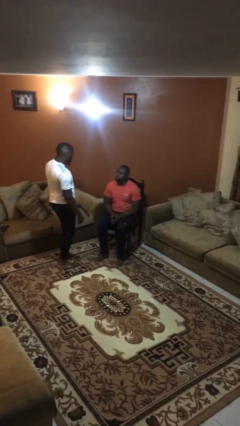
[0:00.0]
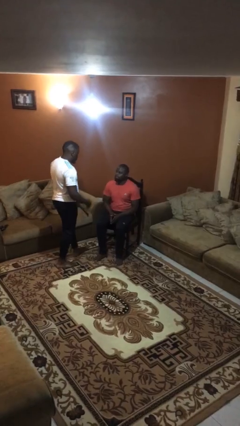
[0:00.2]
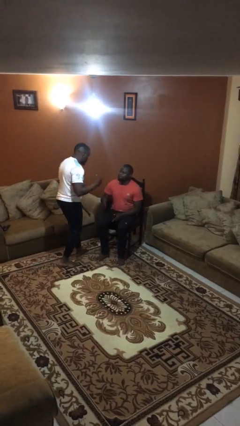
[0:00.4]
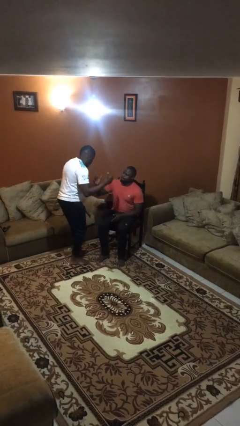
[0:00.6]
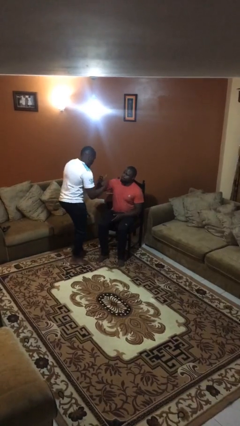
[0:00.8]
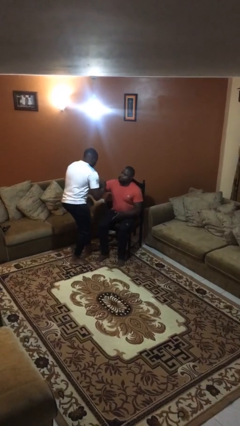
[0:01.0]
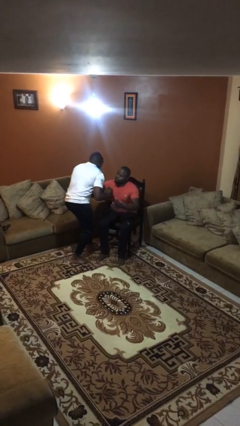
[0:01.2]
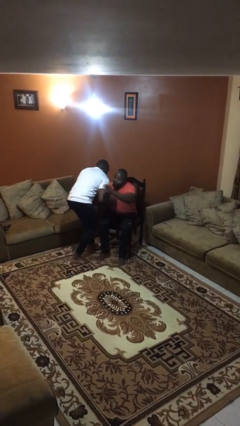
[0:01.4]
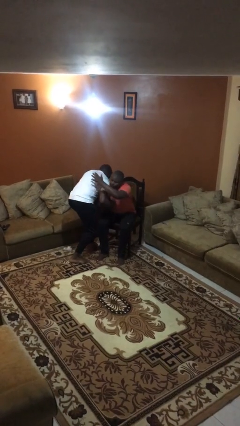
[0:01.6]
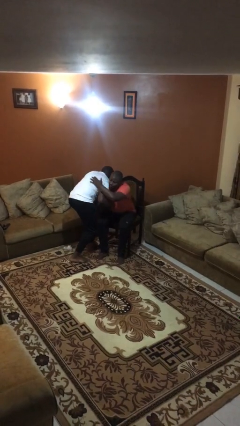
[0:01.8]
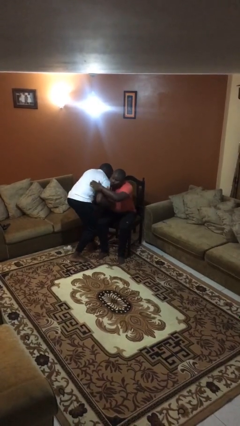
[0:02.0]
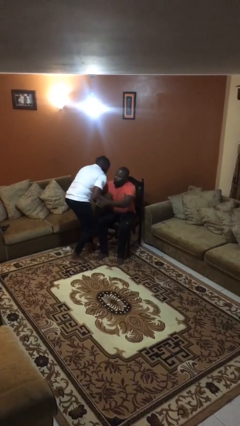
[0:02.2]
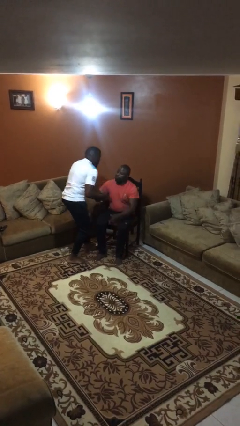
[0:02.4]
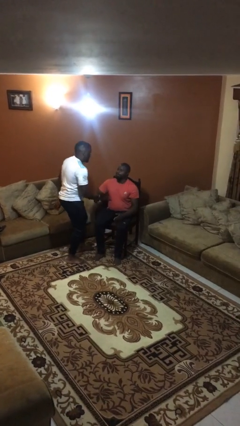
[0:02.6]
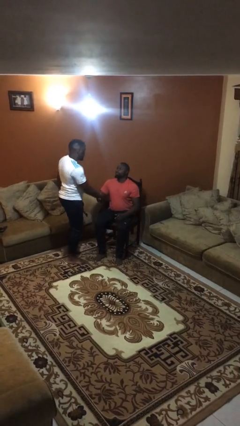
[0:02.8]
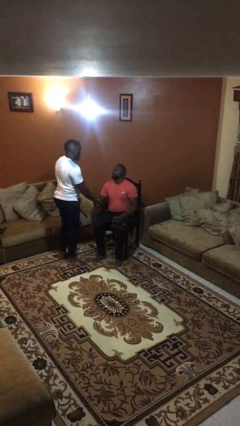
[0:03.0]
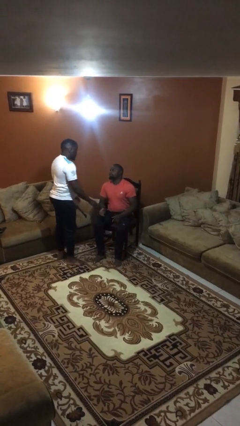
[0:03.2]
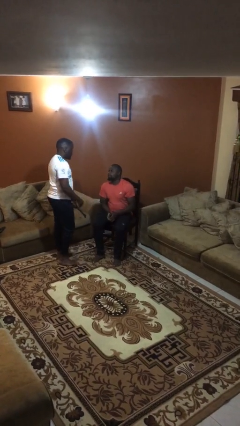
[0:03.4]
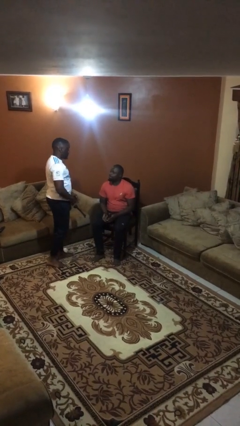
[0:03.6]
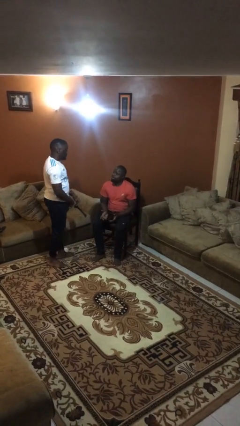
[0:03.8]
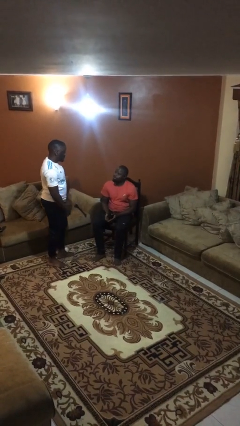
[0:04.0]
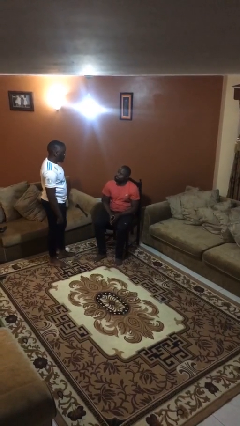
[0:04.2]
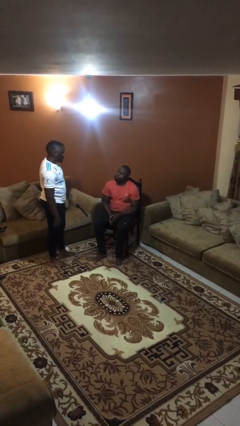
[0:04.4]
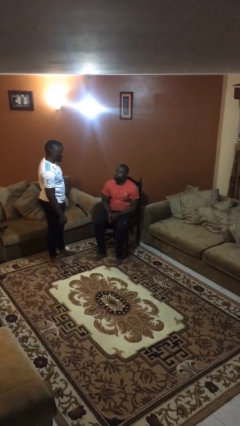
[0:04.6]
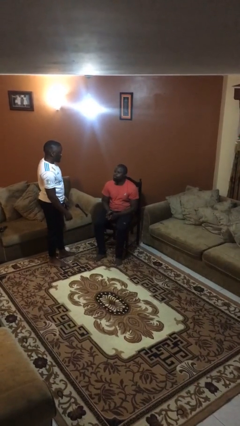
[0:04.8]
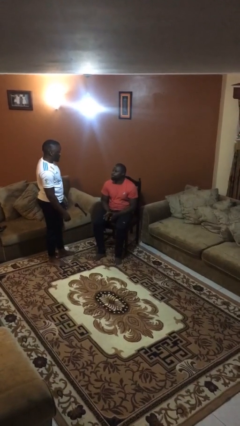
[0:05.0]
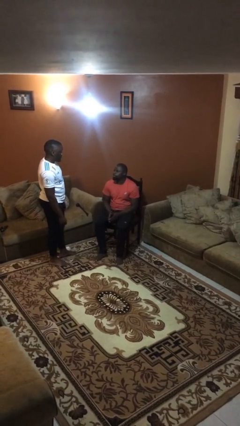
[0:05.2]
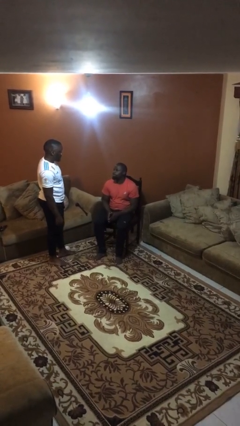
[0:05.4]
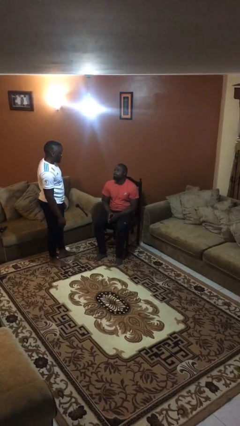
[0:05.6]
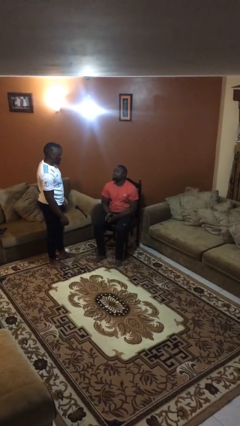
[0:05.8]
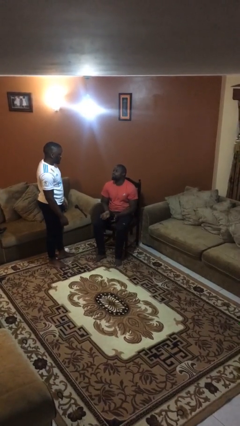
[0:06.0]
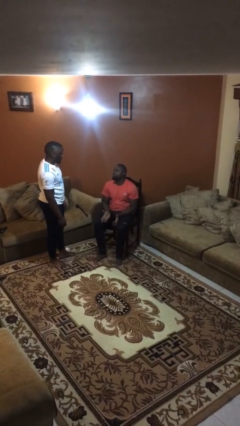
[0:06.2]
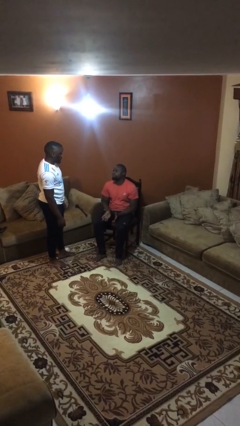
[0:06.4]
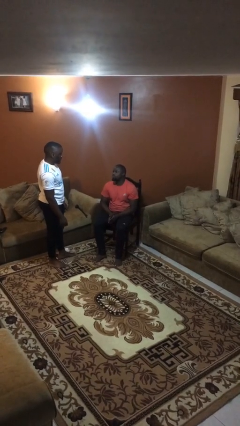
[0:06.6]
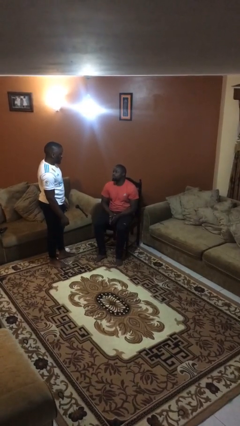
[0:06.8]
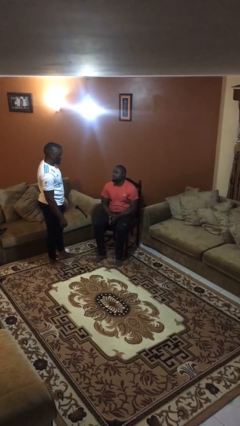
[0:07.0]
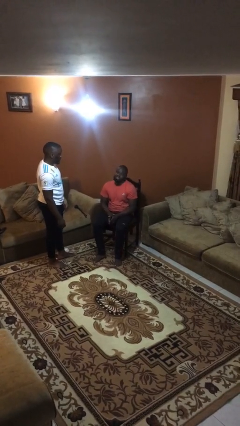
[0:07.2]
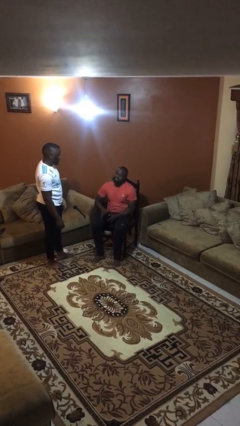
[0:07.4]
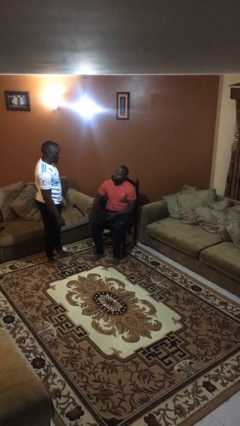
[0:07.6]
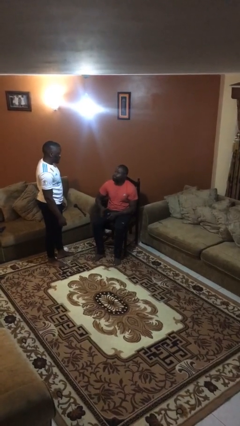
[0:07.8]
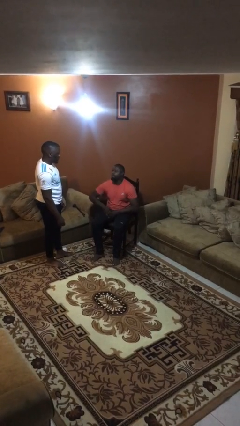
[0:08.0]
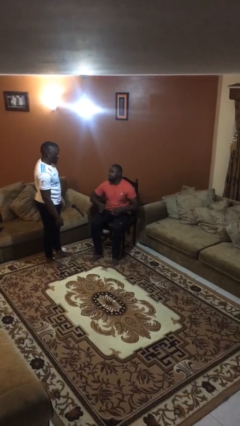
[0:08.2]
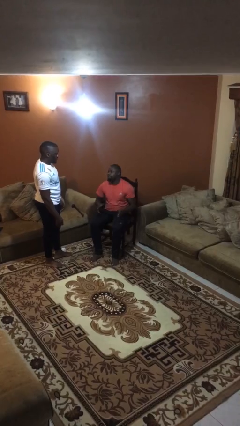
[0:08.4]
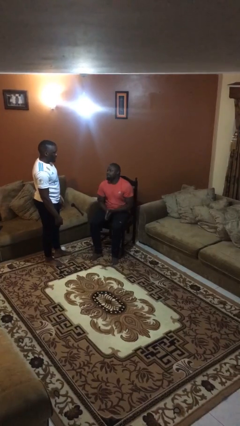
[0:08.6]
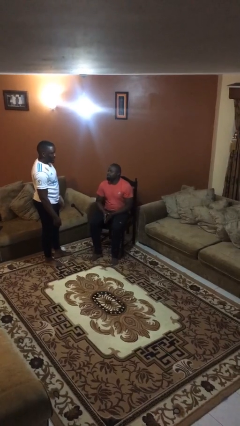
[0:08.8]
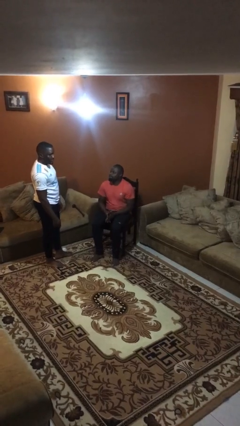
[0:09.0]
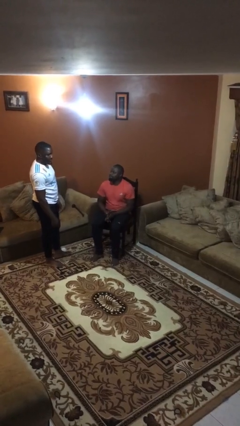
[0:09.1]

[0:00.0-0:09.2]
person embraces person

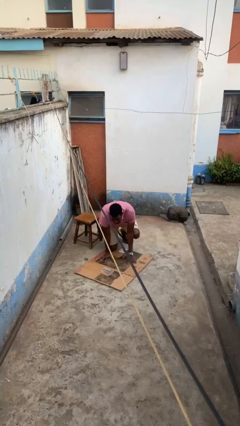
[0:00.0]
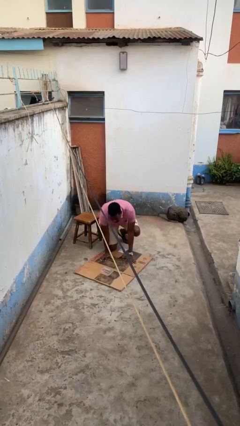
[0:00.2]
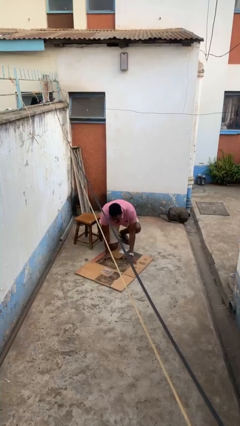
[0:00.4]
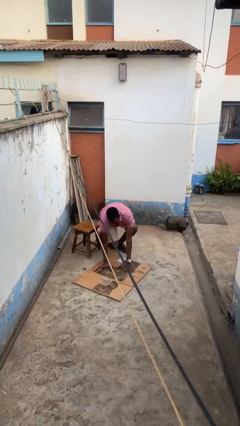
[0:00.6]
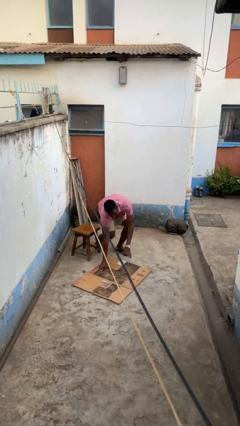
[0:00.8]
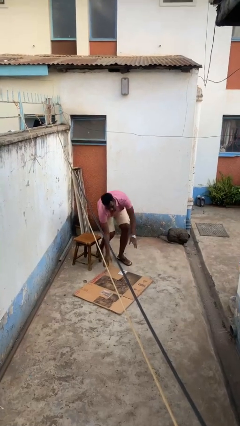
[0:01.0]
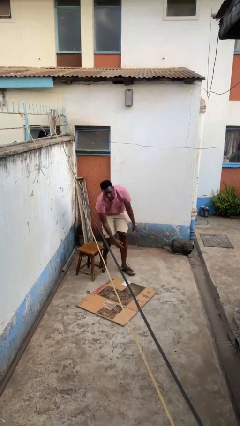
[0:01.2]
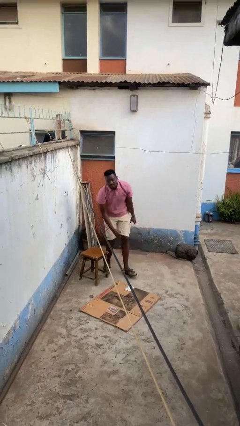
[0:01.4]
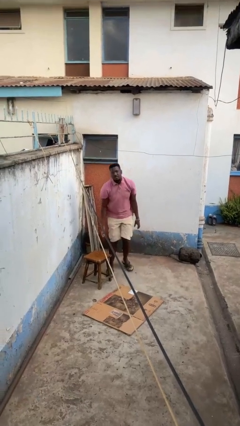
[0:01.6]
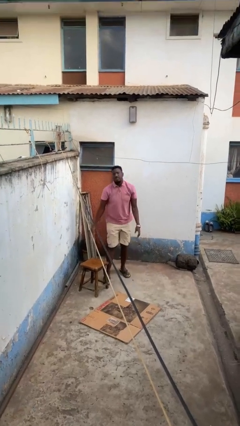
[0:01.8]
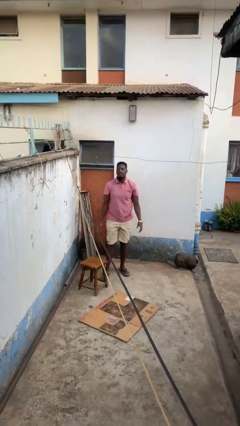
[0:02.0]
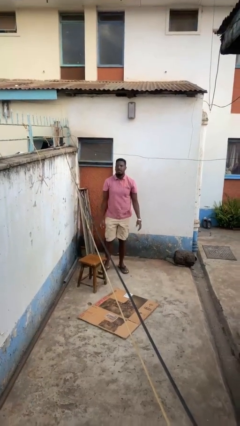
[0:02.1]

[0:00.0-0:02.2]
person stands up from floor

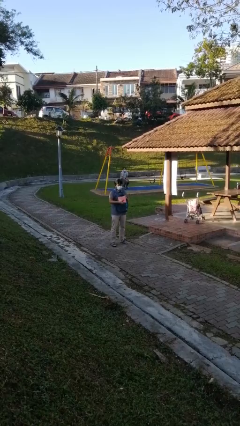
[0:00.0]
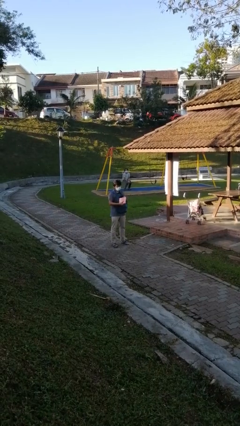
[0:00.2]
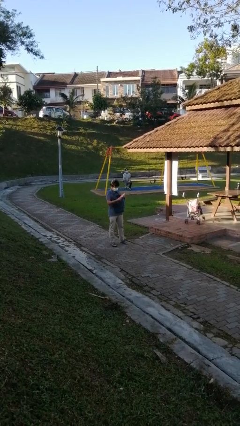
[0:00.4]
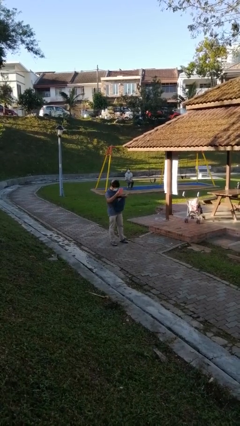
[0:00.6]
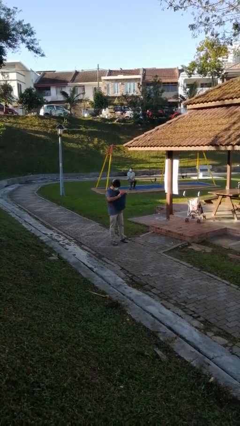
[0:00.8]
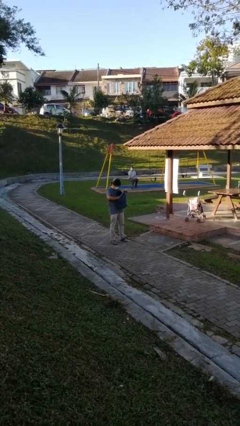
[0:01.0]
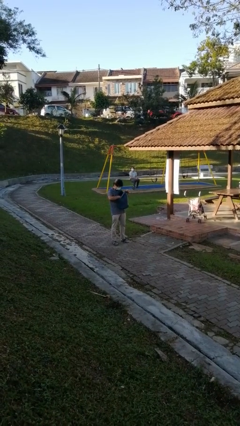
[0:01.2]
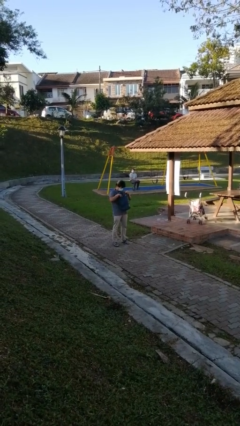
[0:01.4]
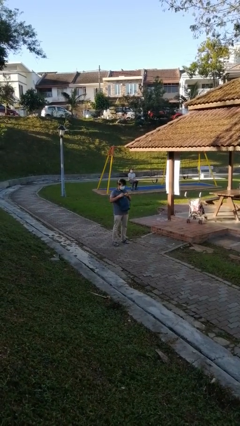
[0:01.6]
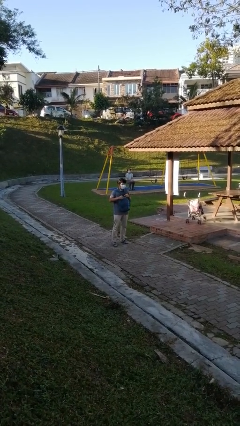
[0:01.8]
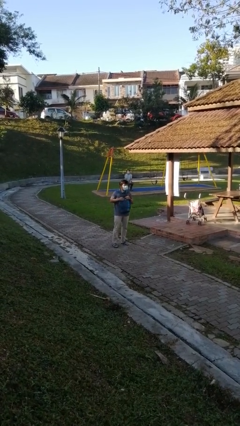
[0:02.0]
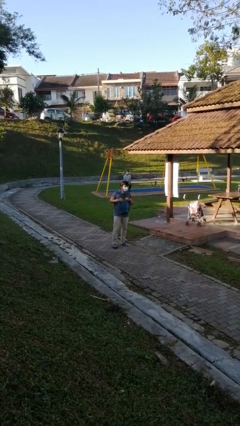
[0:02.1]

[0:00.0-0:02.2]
person puts object into backpack

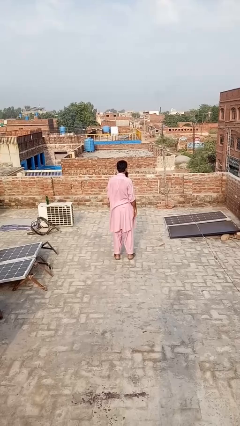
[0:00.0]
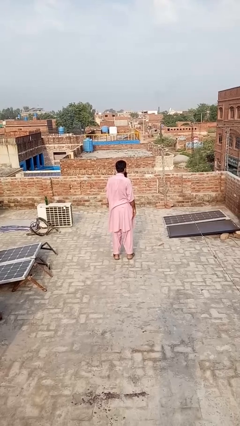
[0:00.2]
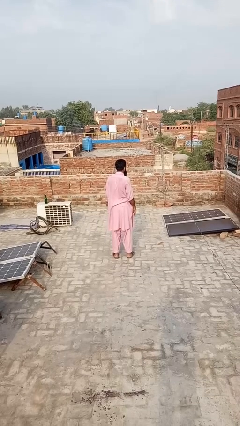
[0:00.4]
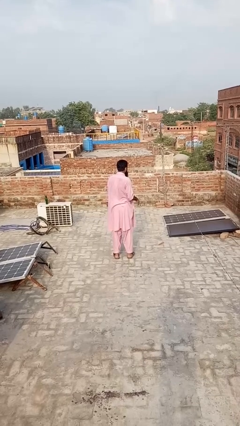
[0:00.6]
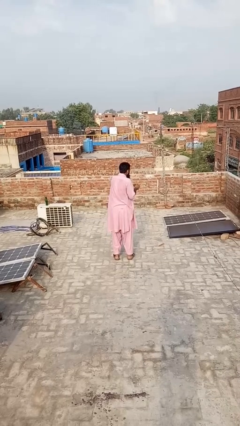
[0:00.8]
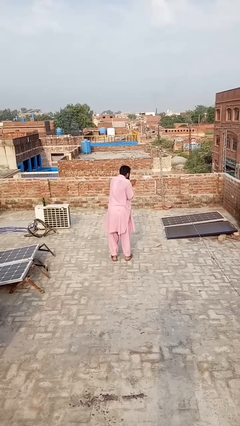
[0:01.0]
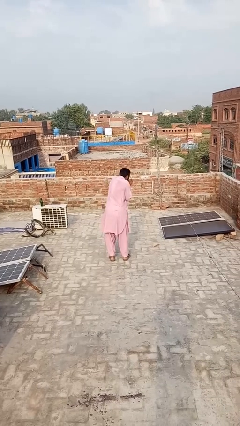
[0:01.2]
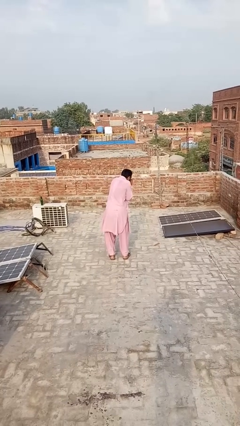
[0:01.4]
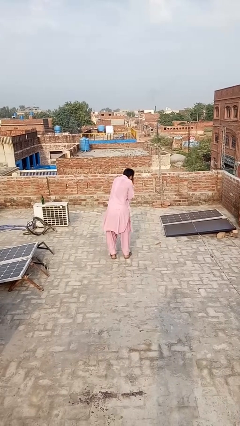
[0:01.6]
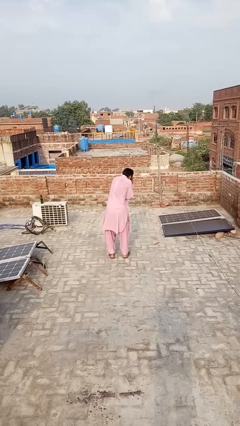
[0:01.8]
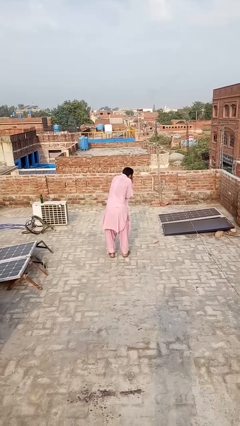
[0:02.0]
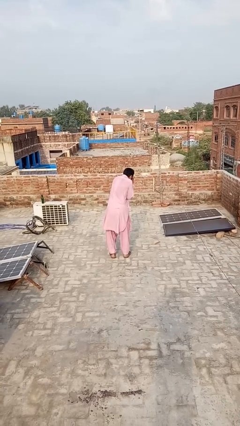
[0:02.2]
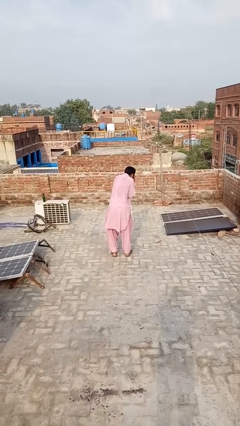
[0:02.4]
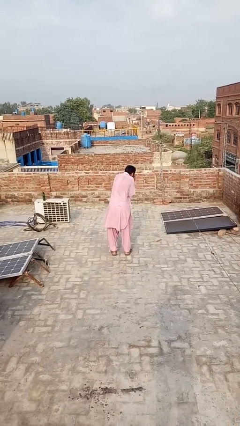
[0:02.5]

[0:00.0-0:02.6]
person blows into hands

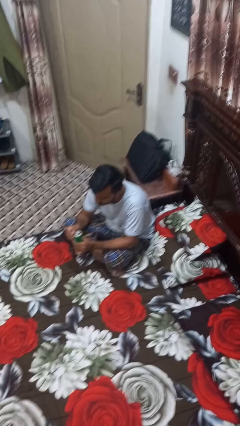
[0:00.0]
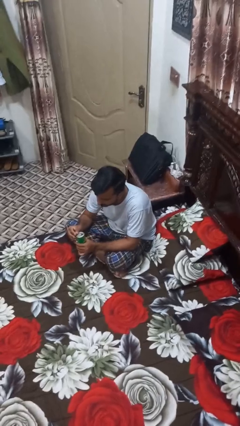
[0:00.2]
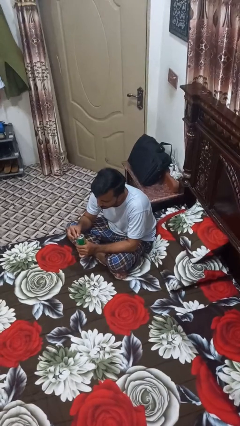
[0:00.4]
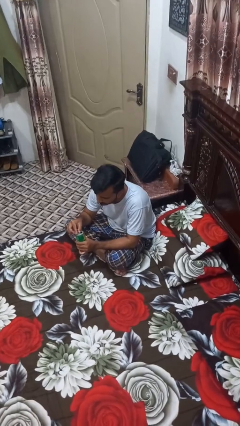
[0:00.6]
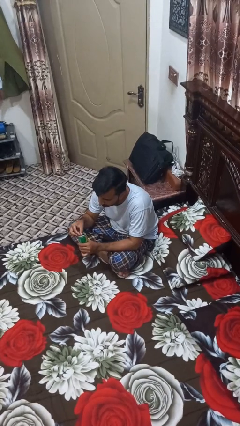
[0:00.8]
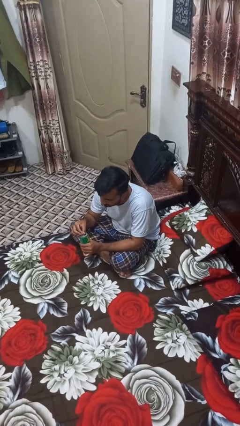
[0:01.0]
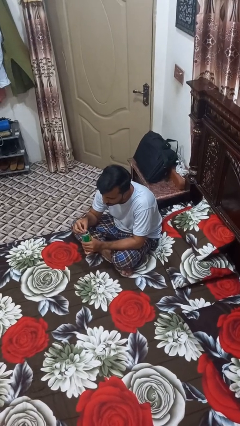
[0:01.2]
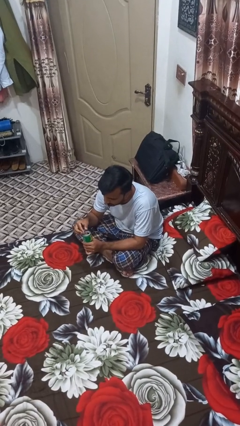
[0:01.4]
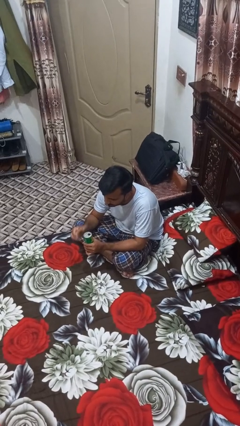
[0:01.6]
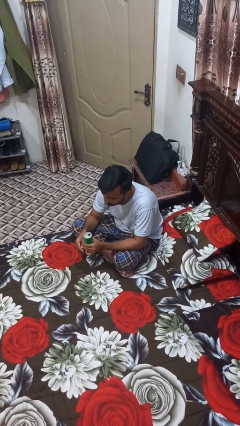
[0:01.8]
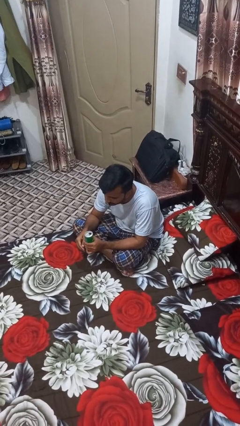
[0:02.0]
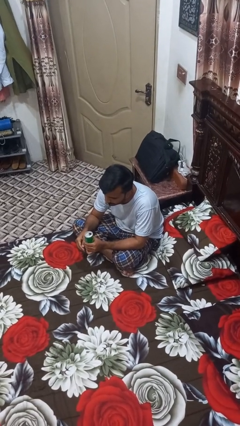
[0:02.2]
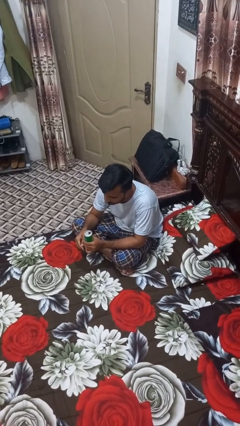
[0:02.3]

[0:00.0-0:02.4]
person opens can with can opener
